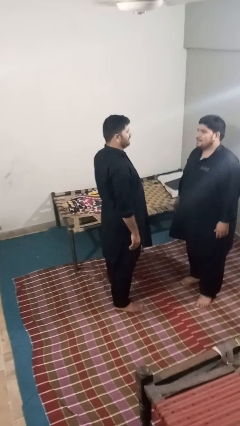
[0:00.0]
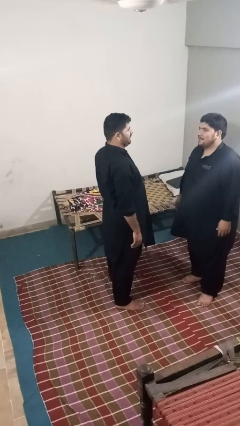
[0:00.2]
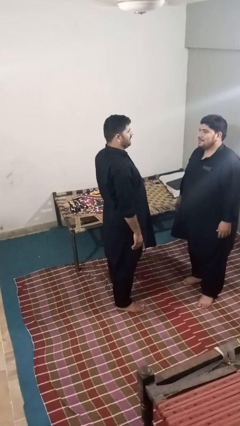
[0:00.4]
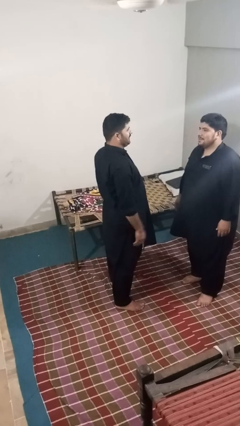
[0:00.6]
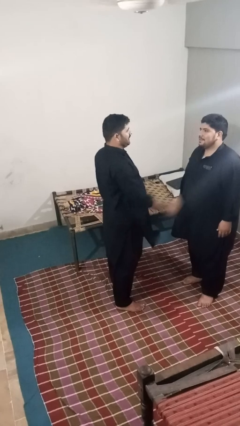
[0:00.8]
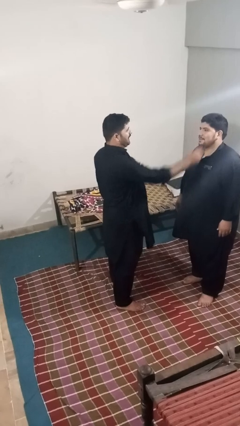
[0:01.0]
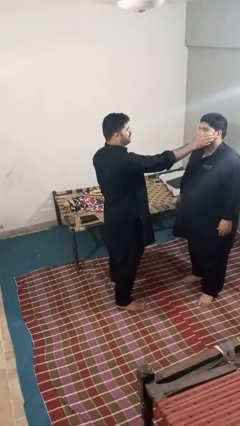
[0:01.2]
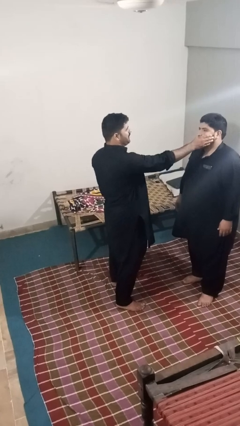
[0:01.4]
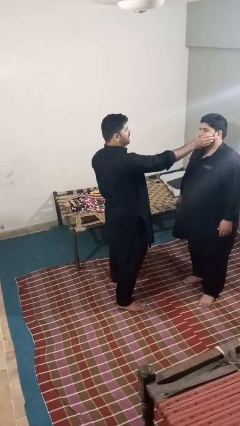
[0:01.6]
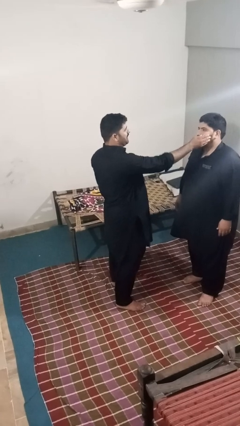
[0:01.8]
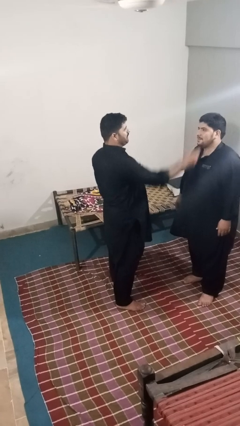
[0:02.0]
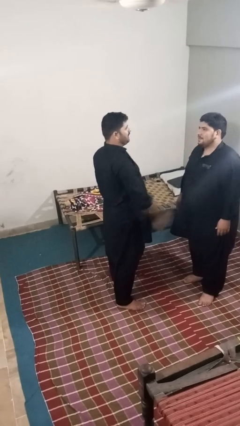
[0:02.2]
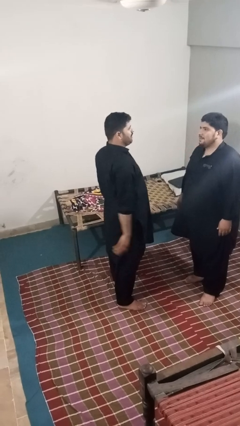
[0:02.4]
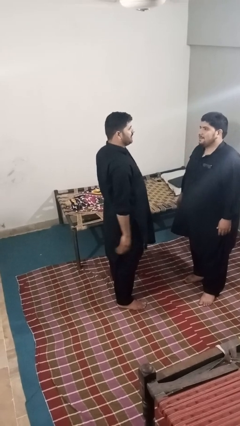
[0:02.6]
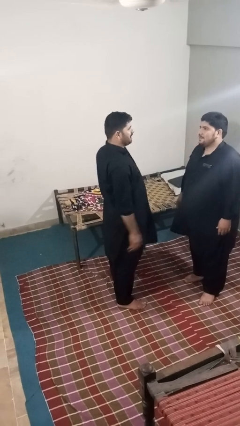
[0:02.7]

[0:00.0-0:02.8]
person touches face of person

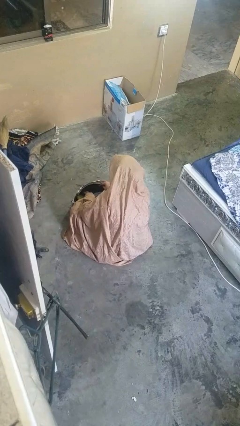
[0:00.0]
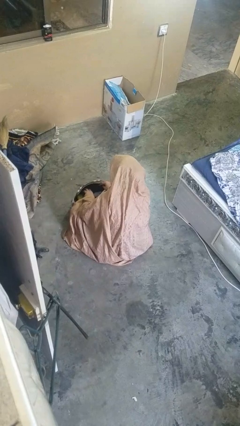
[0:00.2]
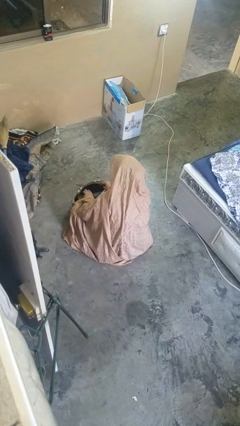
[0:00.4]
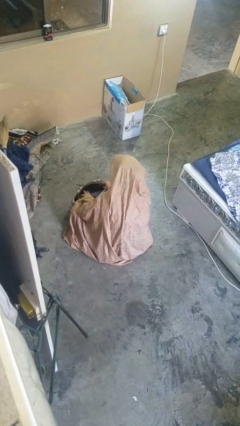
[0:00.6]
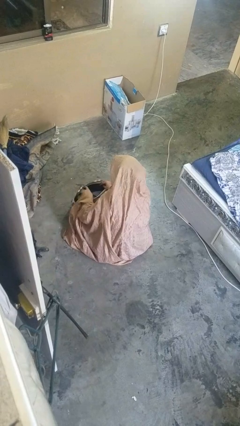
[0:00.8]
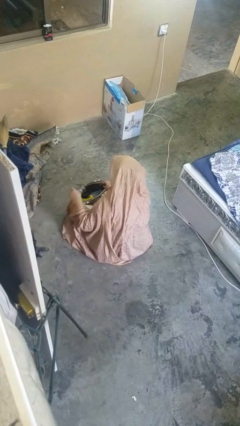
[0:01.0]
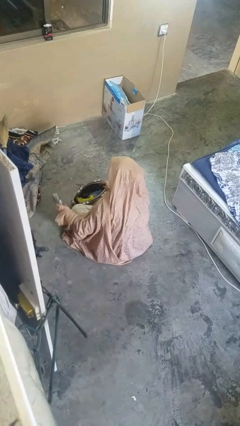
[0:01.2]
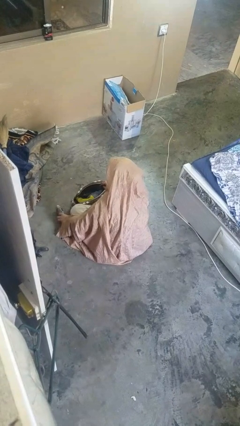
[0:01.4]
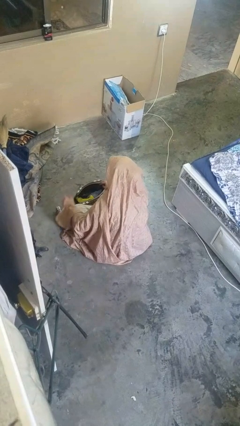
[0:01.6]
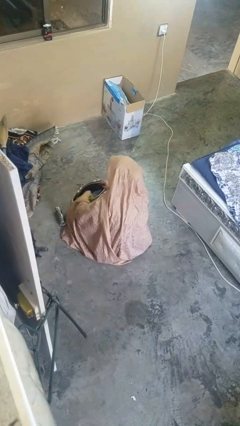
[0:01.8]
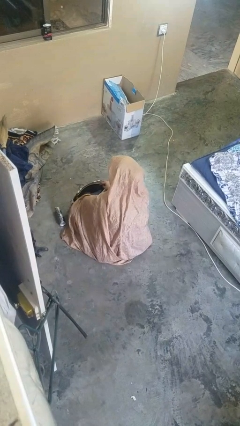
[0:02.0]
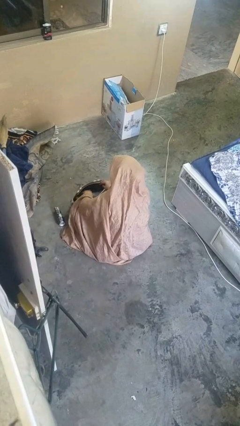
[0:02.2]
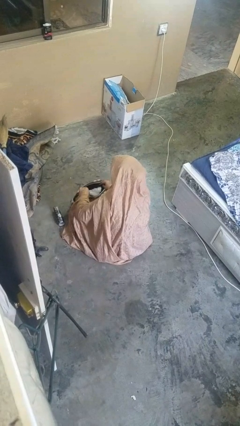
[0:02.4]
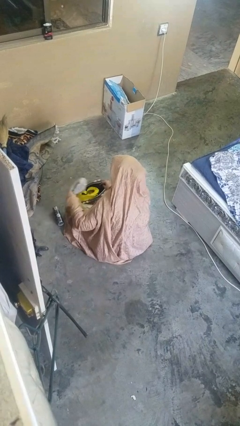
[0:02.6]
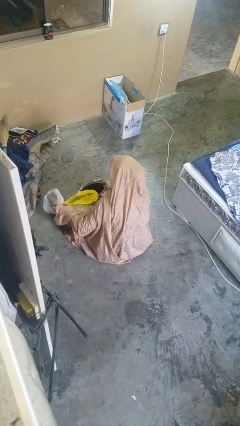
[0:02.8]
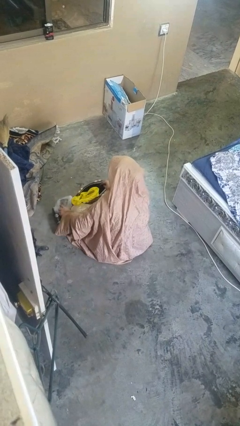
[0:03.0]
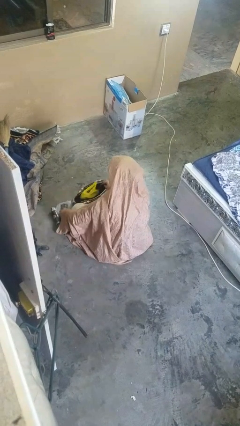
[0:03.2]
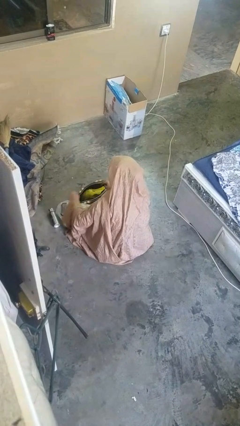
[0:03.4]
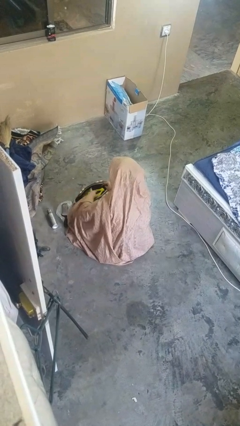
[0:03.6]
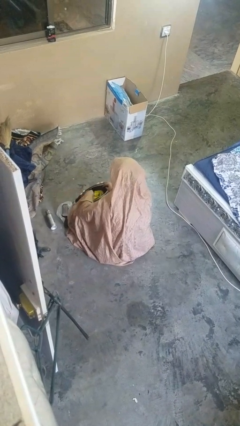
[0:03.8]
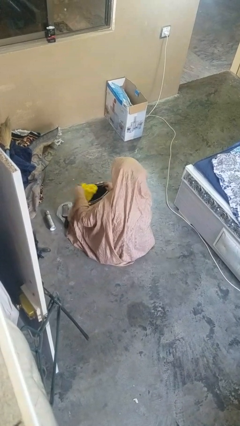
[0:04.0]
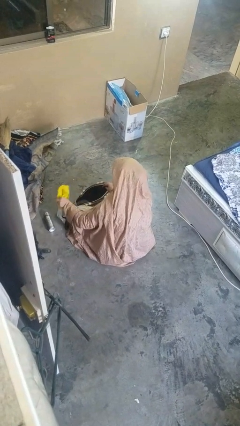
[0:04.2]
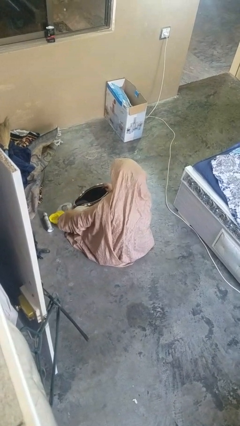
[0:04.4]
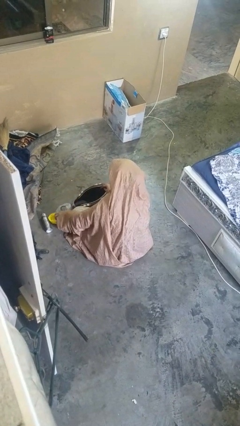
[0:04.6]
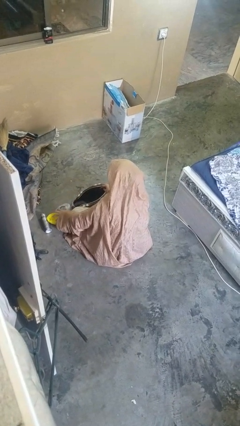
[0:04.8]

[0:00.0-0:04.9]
person takes object from purse

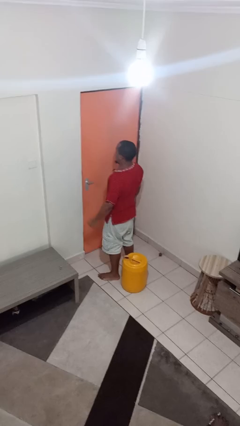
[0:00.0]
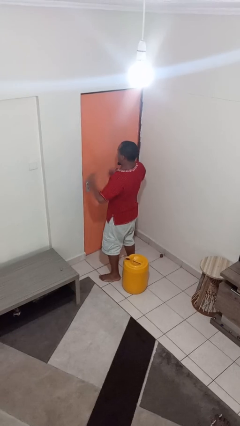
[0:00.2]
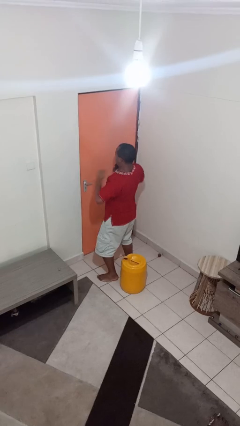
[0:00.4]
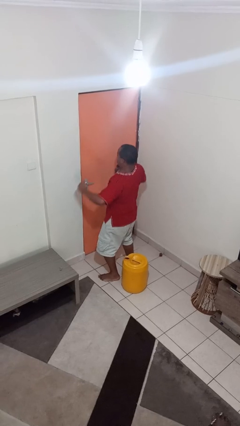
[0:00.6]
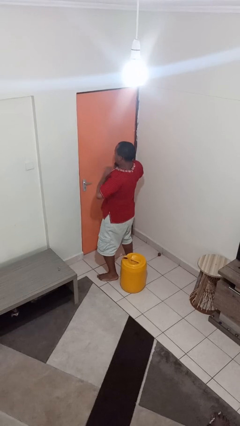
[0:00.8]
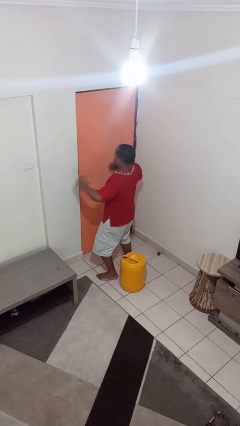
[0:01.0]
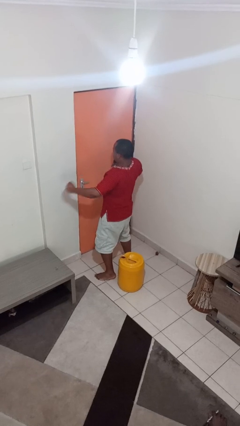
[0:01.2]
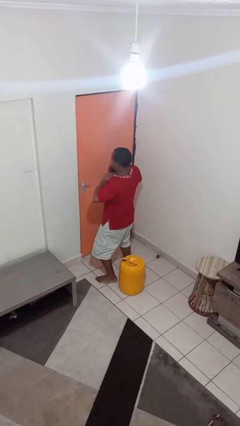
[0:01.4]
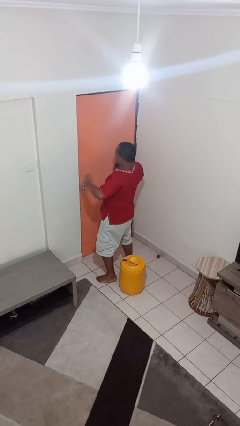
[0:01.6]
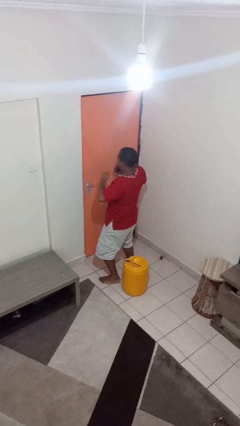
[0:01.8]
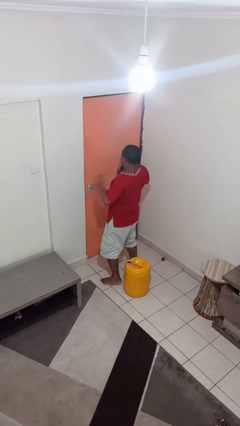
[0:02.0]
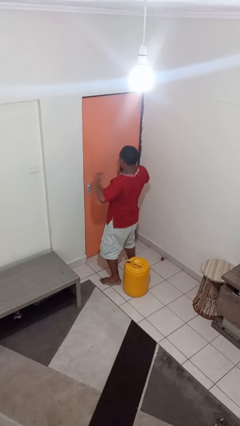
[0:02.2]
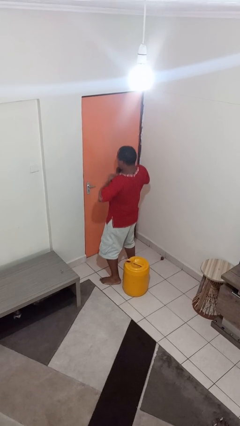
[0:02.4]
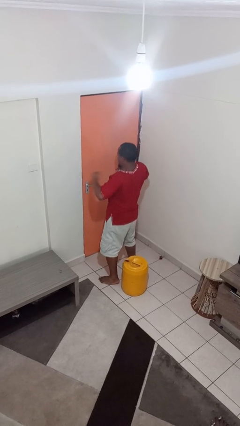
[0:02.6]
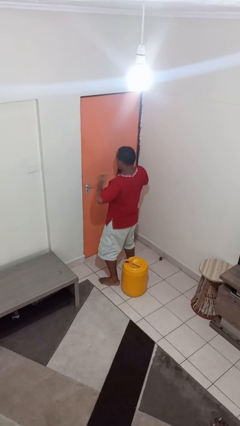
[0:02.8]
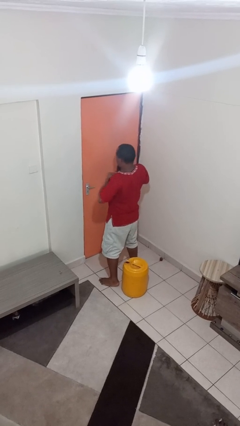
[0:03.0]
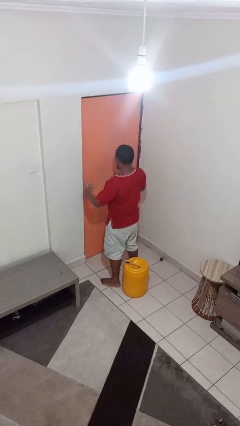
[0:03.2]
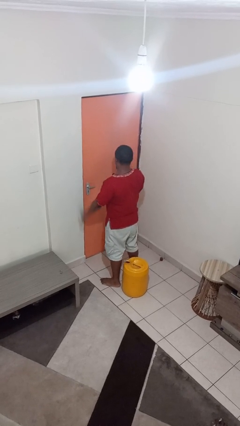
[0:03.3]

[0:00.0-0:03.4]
person drums on chest

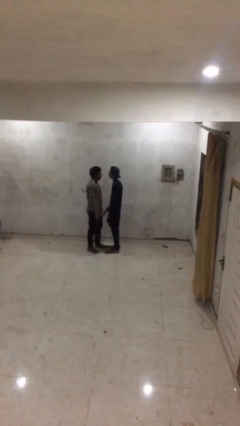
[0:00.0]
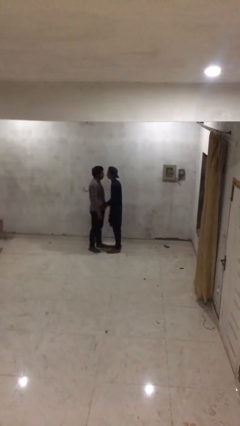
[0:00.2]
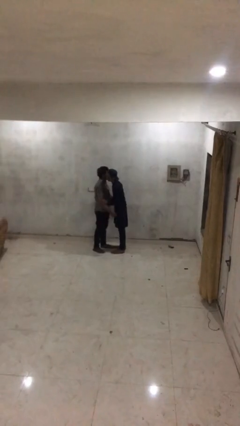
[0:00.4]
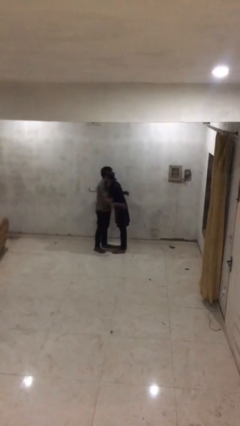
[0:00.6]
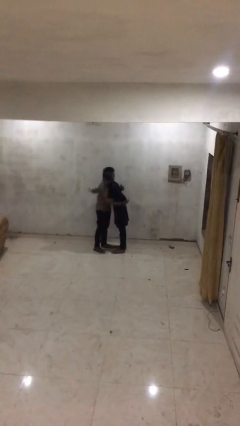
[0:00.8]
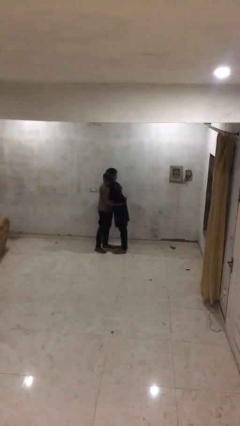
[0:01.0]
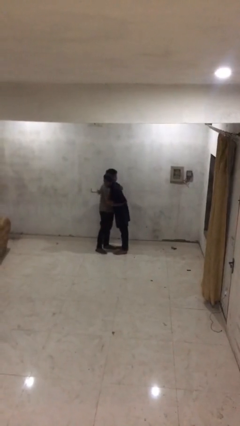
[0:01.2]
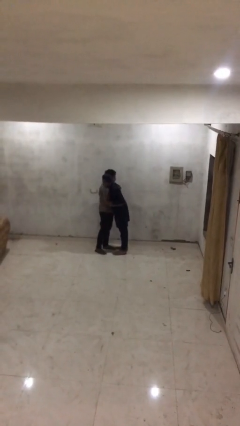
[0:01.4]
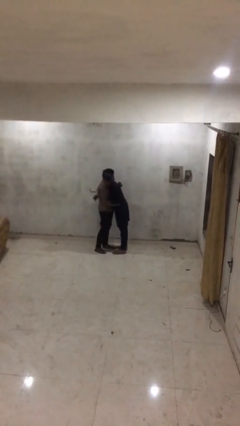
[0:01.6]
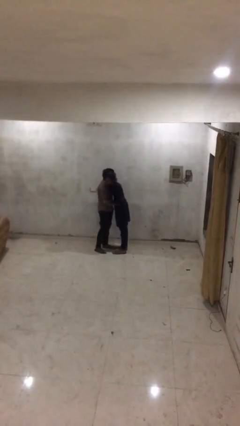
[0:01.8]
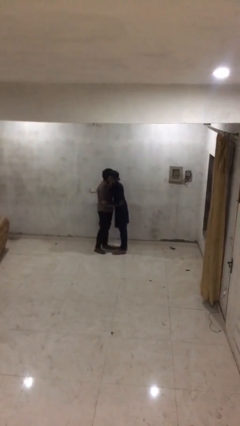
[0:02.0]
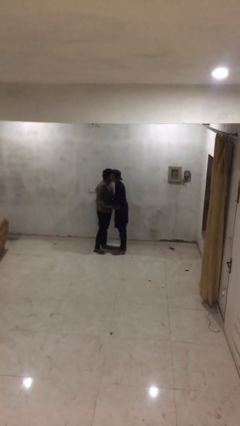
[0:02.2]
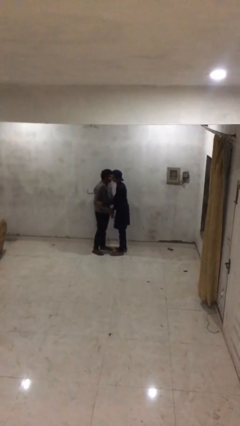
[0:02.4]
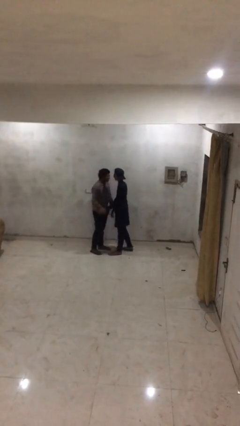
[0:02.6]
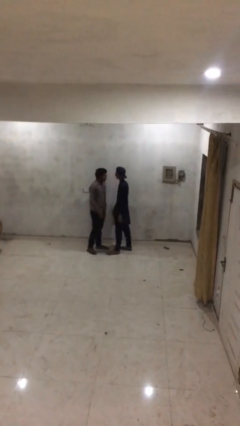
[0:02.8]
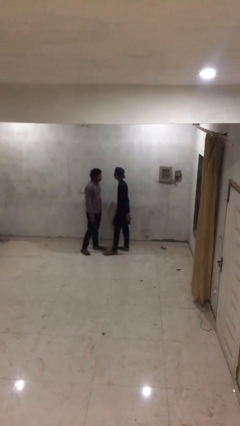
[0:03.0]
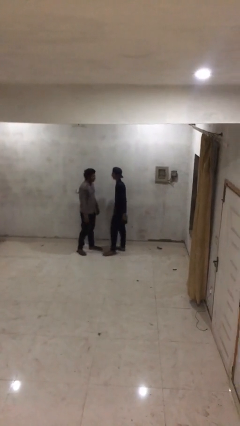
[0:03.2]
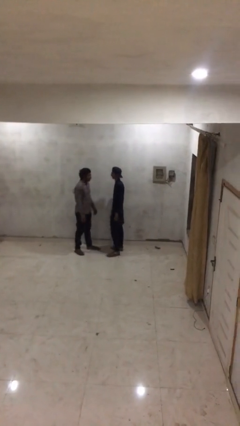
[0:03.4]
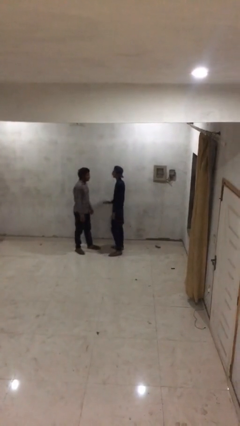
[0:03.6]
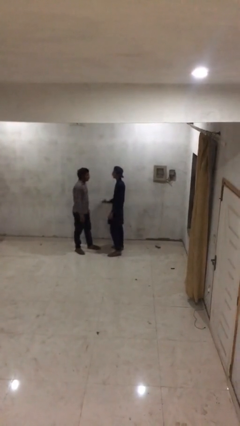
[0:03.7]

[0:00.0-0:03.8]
person embraces person

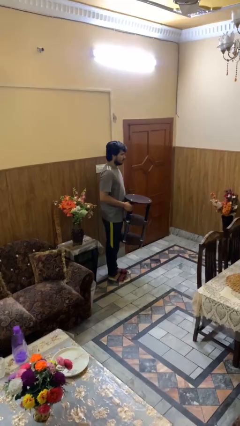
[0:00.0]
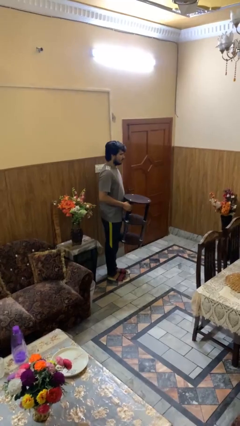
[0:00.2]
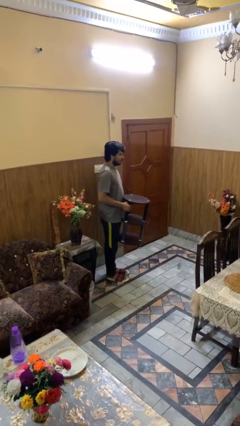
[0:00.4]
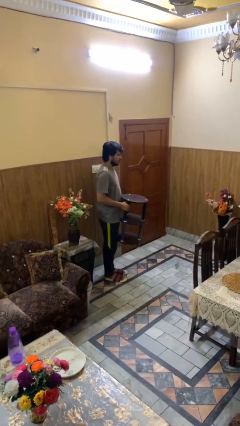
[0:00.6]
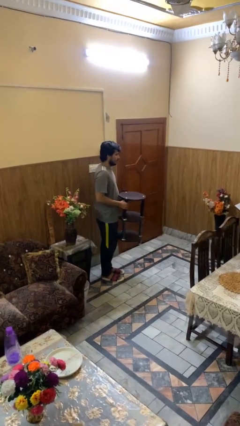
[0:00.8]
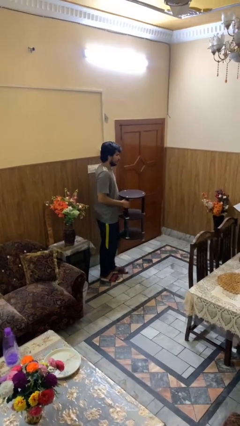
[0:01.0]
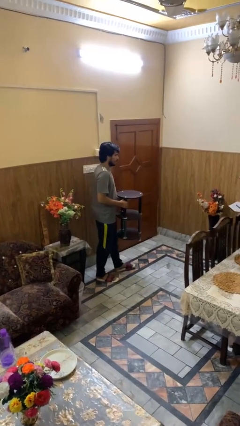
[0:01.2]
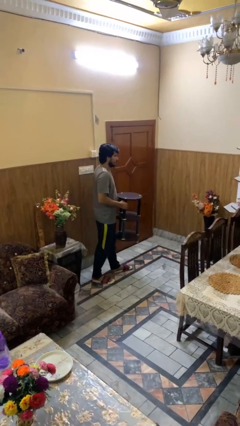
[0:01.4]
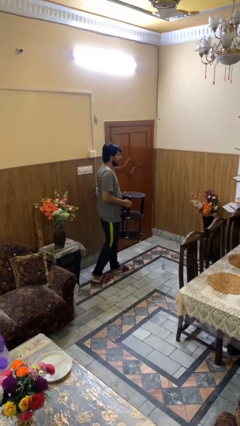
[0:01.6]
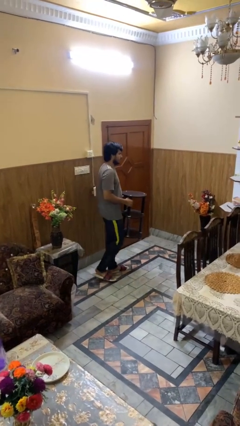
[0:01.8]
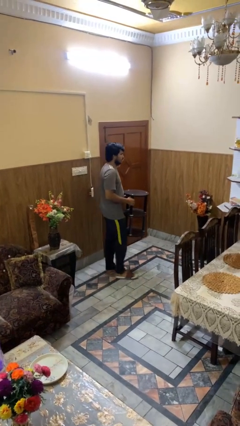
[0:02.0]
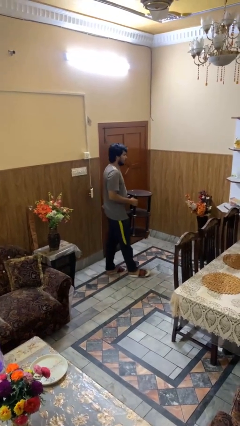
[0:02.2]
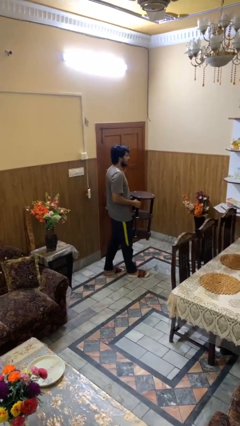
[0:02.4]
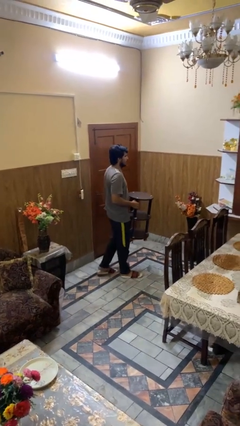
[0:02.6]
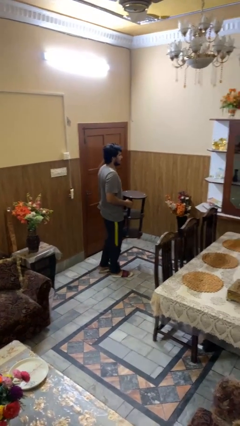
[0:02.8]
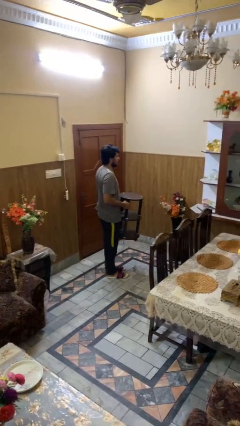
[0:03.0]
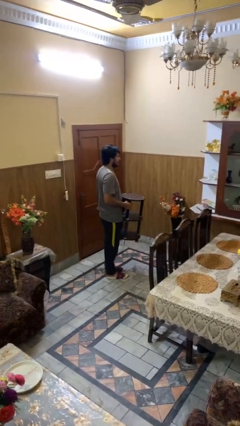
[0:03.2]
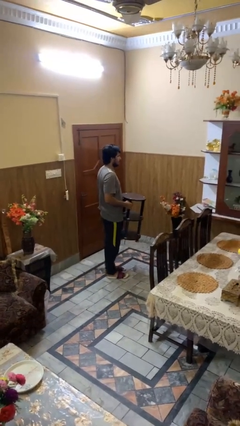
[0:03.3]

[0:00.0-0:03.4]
person carries furniture
